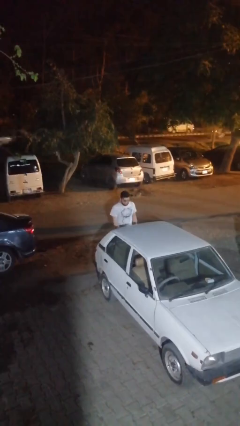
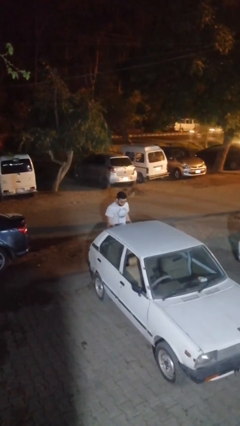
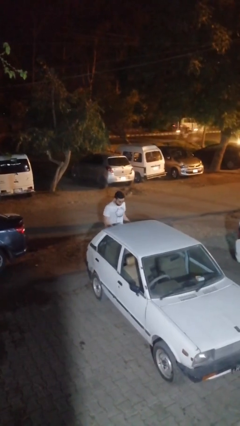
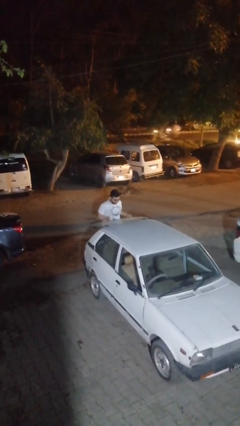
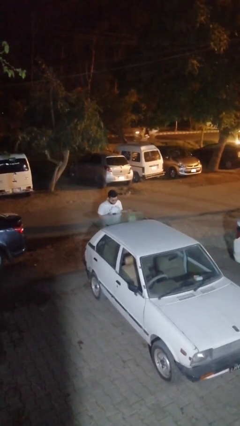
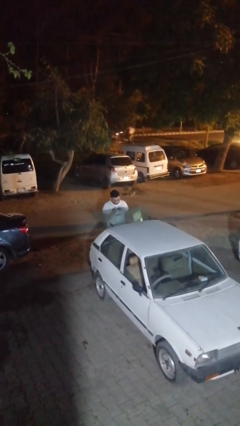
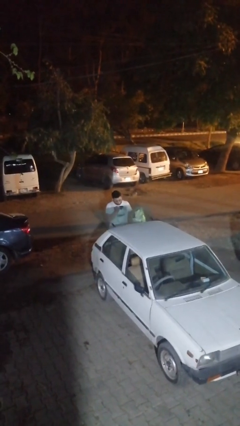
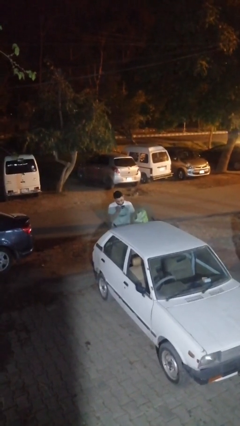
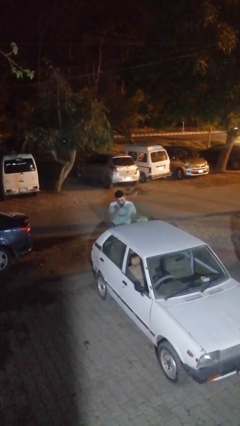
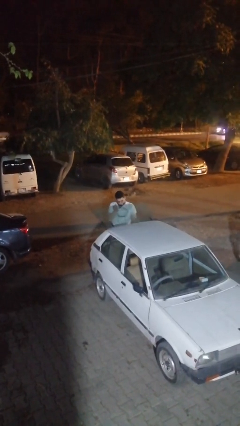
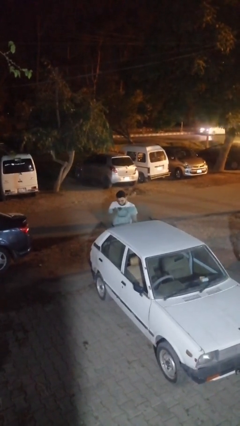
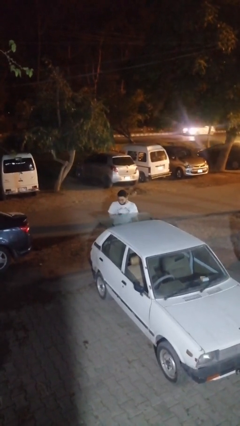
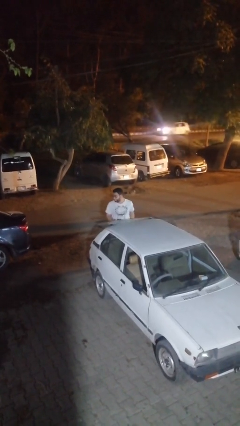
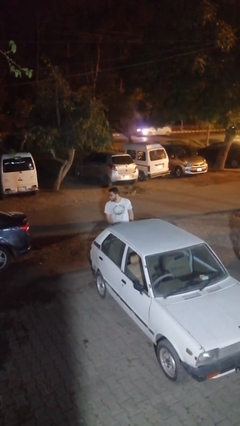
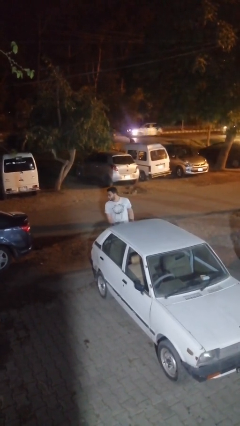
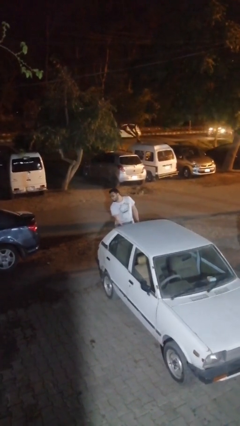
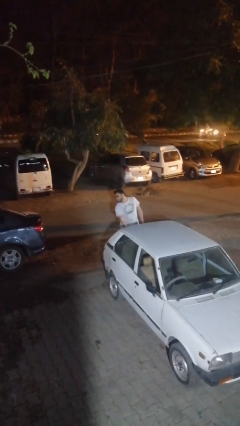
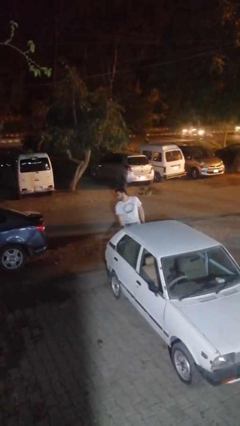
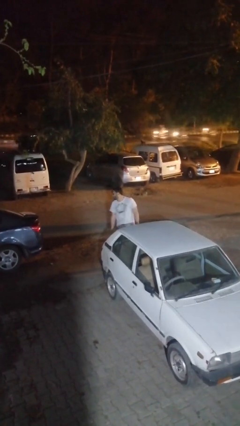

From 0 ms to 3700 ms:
person loads car

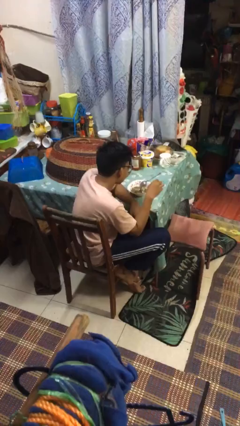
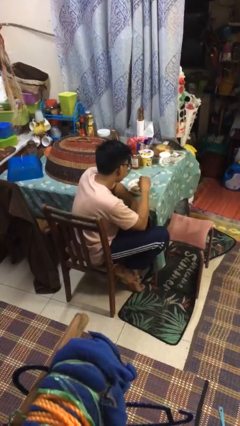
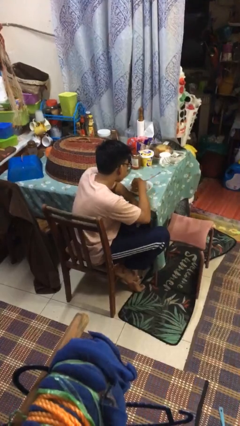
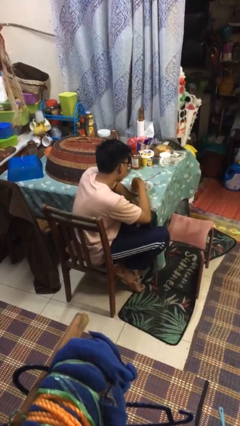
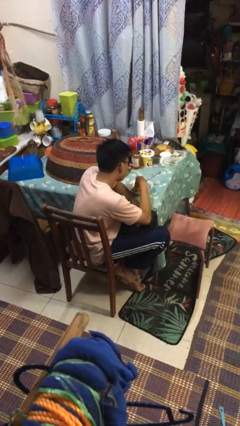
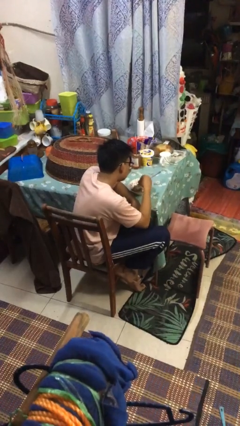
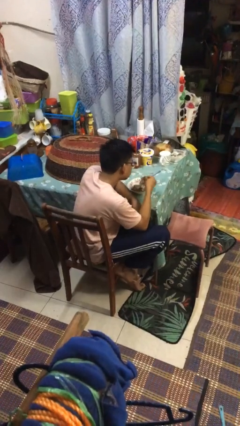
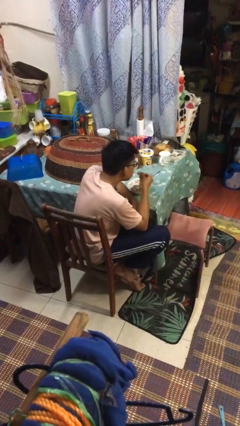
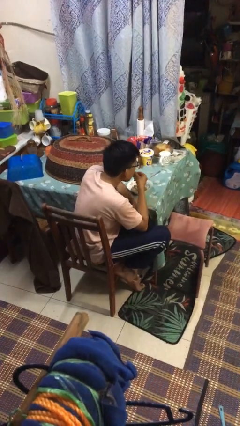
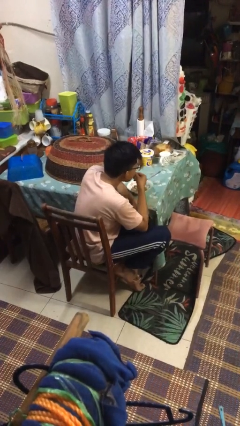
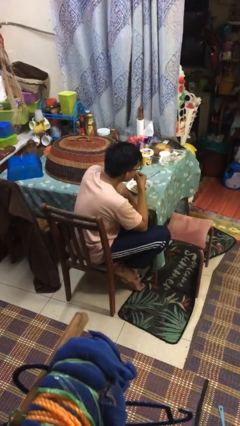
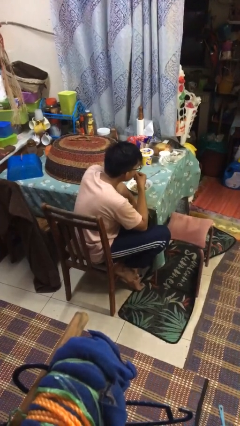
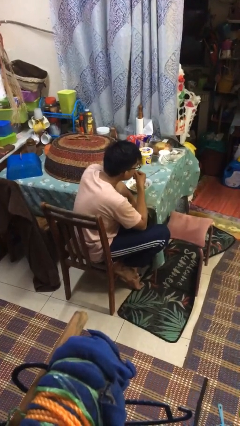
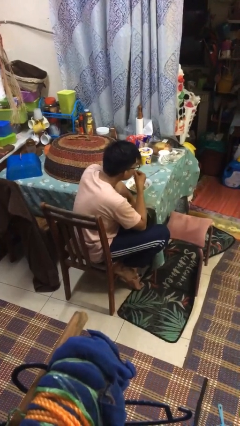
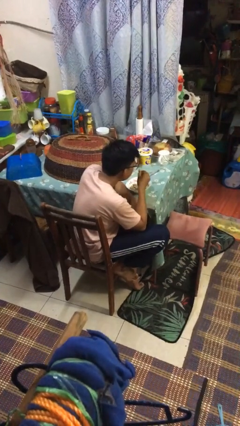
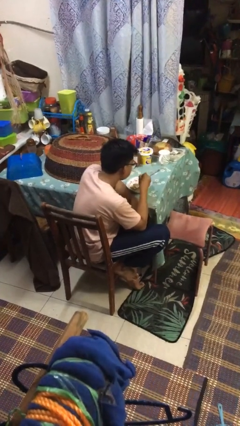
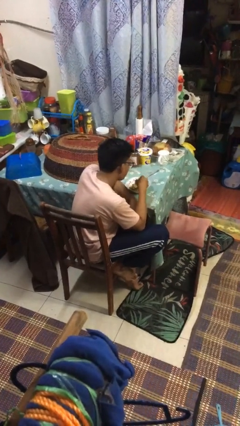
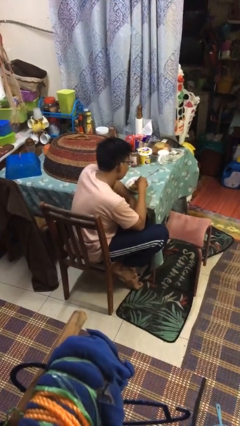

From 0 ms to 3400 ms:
person eats with hands

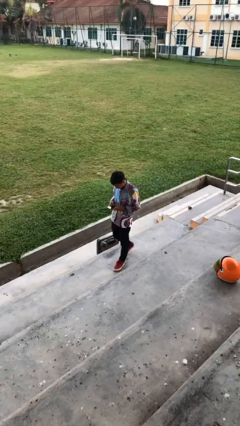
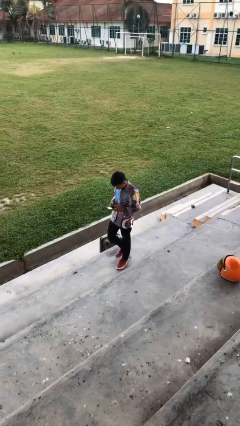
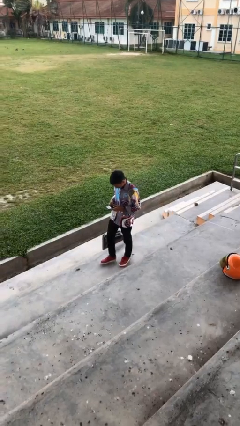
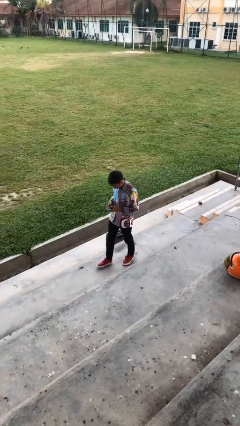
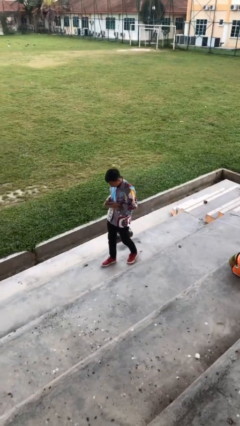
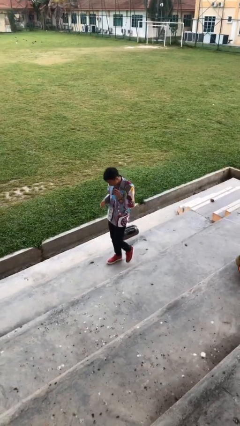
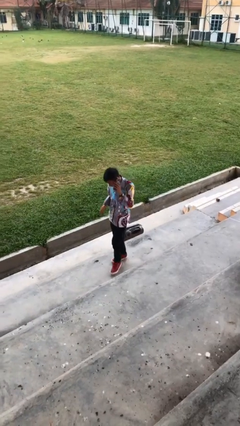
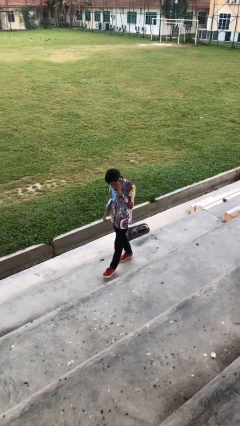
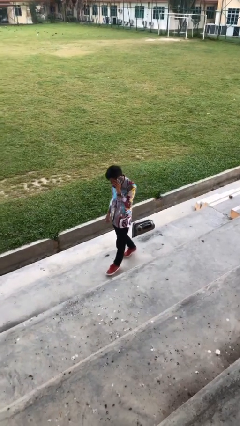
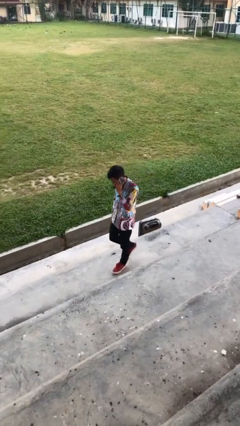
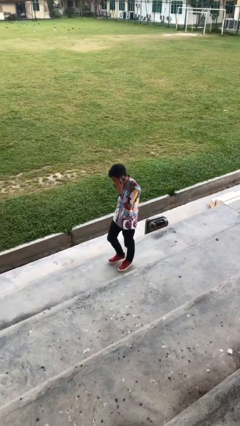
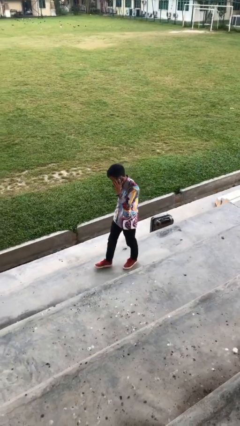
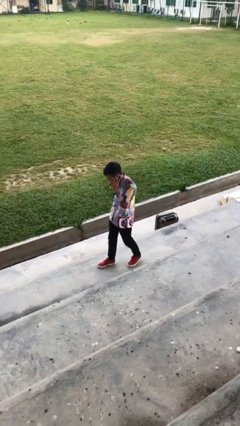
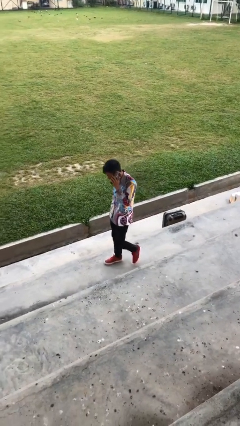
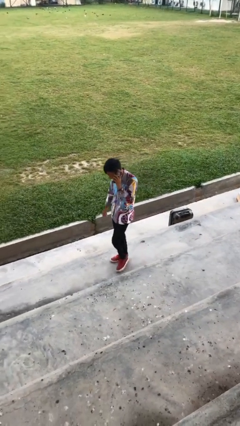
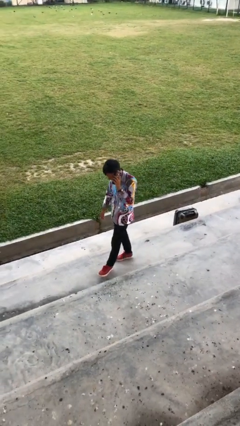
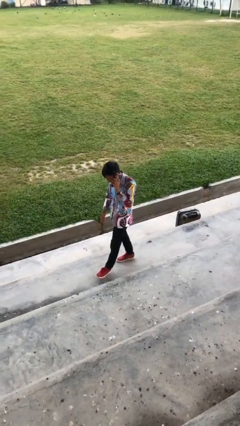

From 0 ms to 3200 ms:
person talks on phone

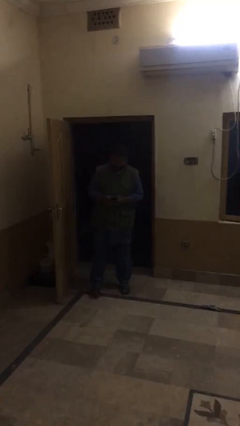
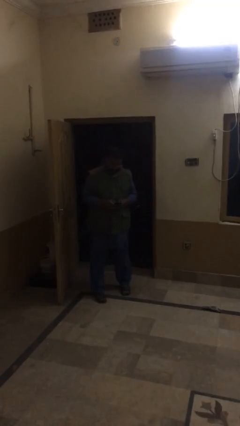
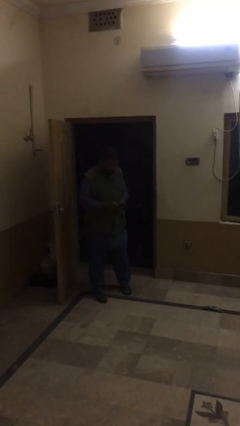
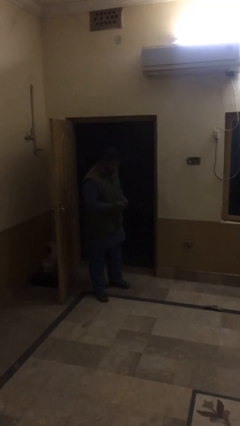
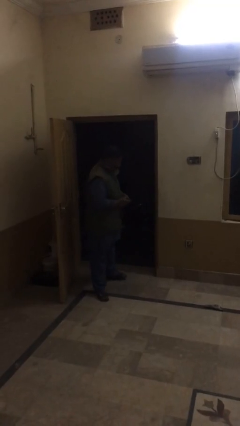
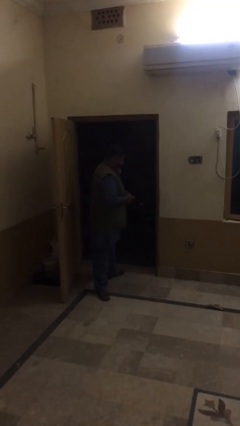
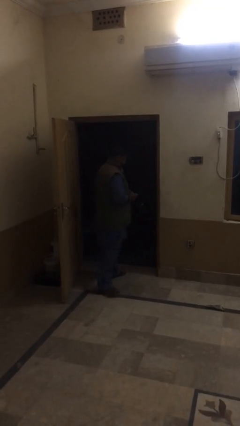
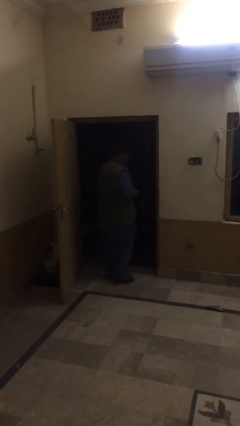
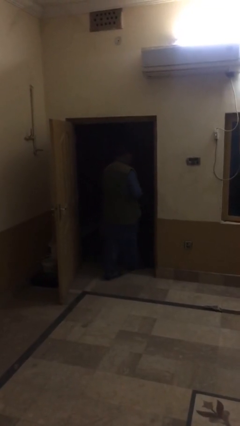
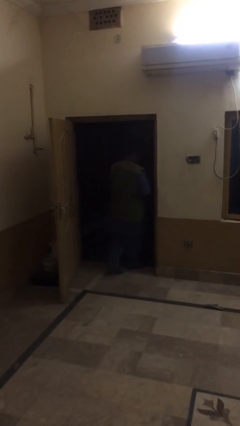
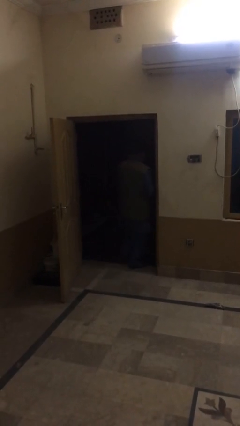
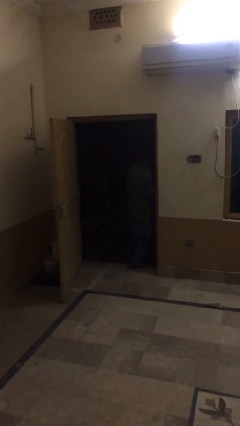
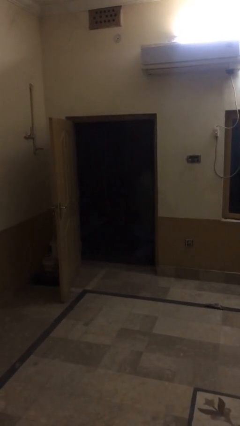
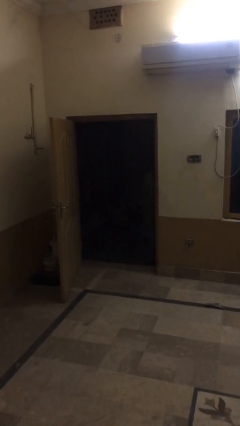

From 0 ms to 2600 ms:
person exits scene through structure

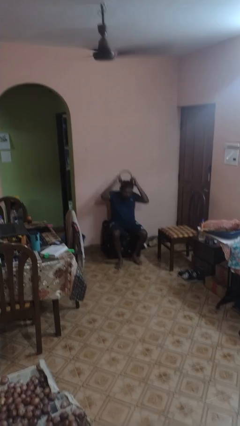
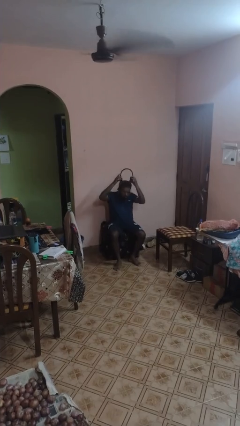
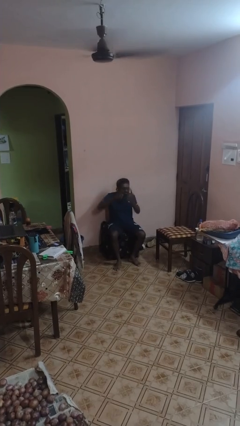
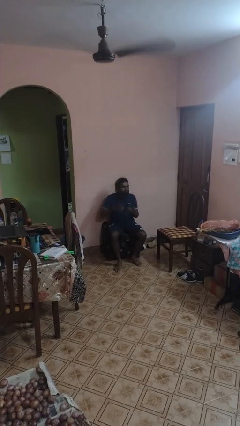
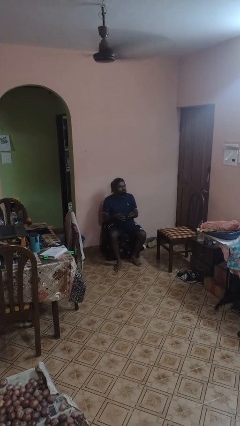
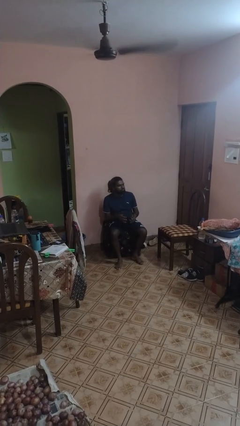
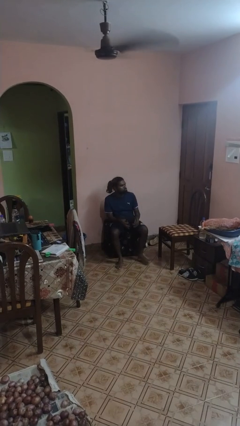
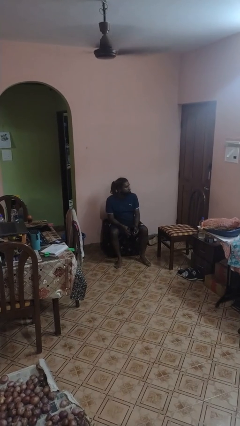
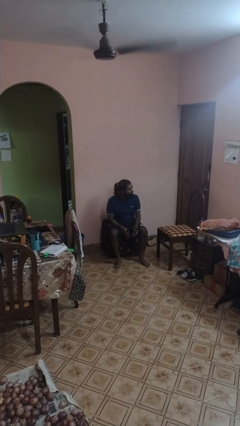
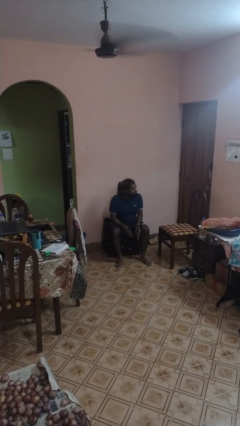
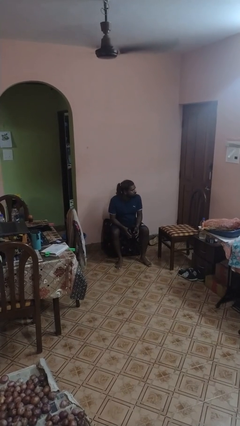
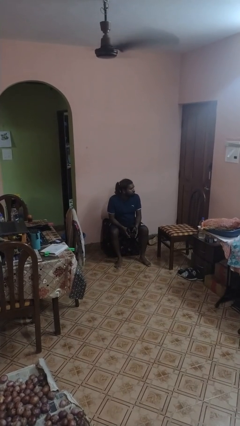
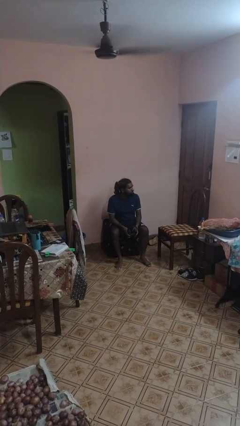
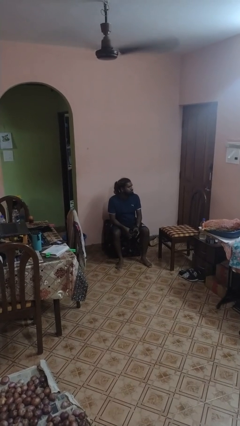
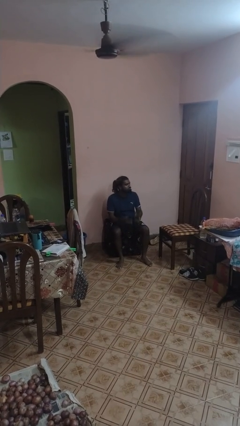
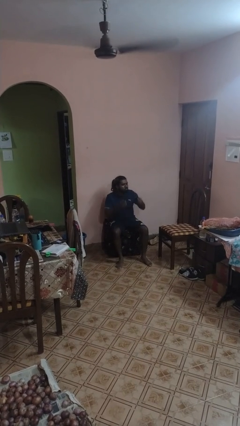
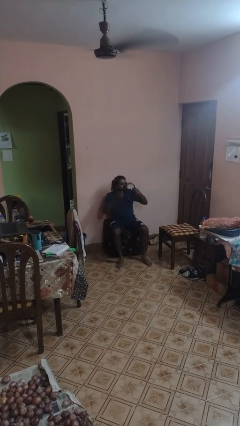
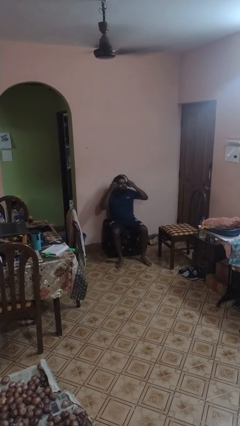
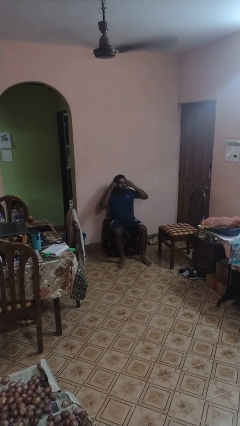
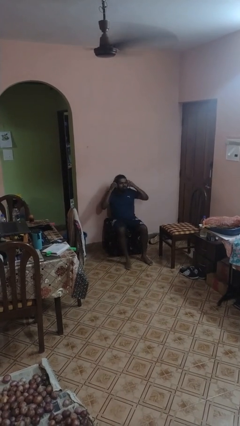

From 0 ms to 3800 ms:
person takes off headphones

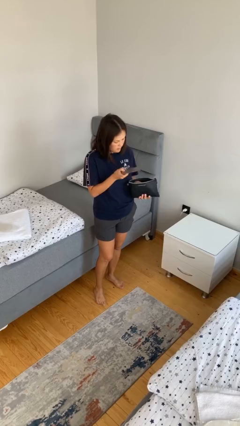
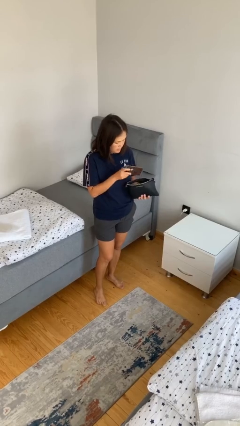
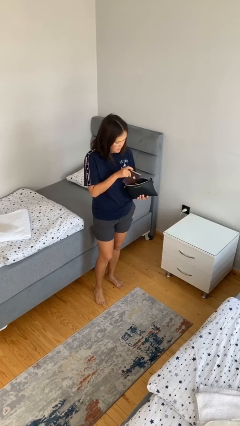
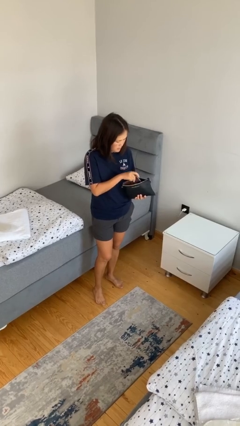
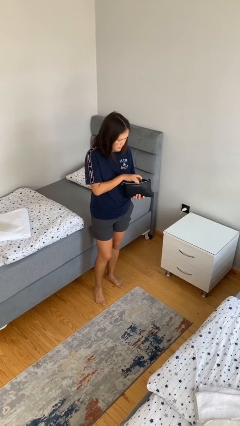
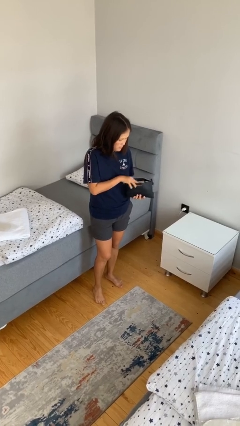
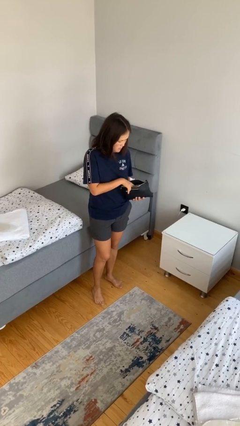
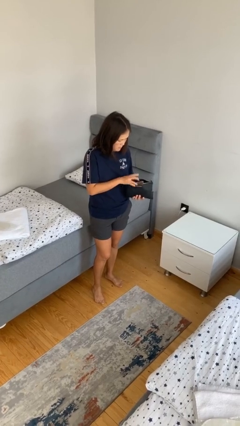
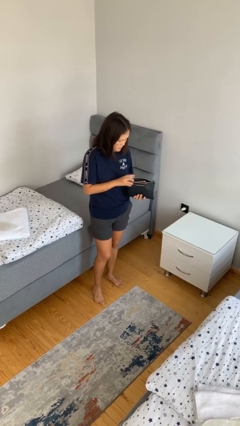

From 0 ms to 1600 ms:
person puts object into purse
